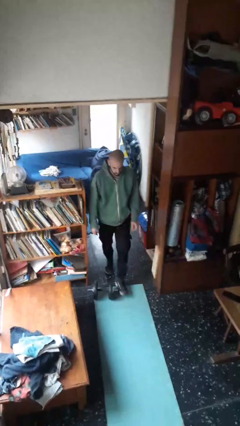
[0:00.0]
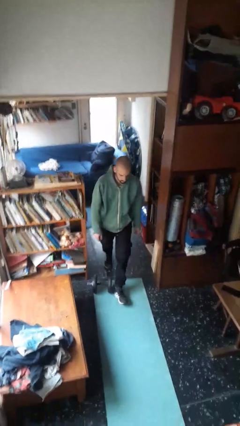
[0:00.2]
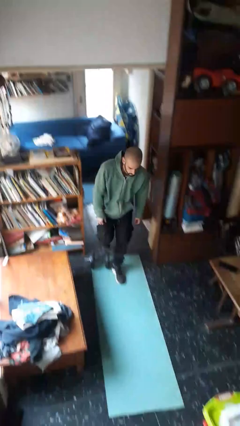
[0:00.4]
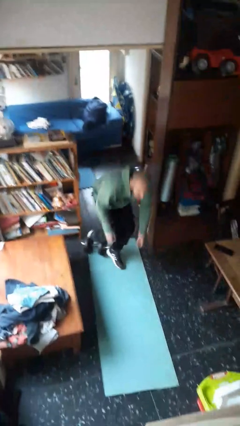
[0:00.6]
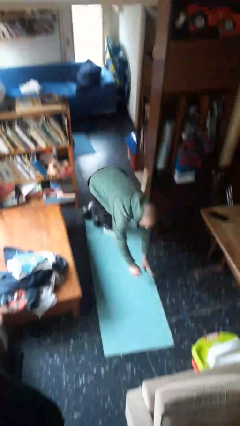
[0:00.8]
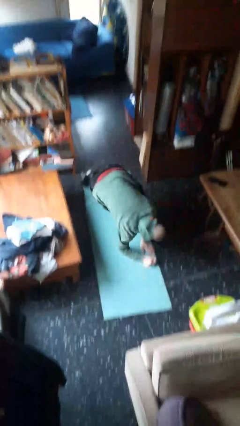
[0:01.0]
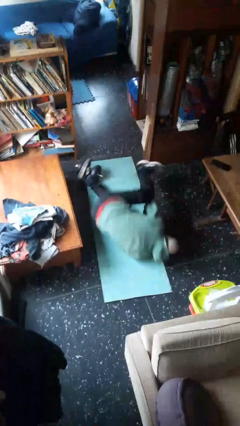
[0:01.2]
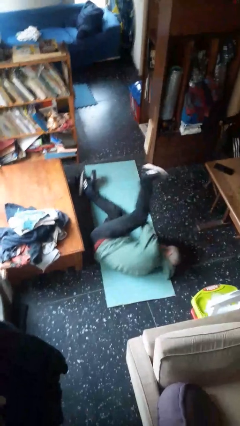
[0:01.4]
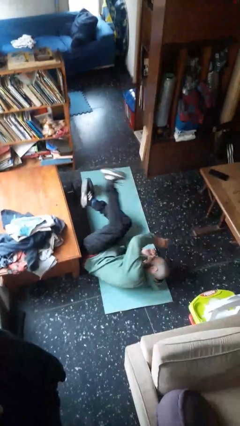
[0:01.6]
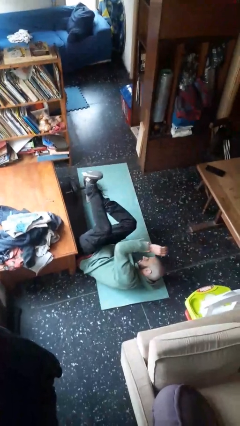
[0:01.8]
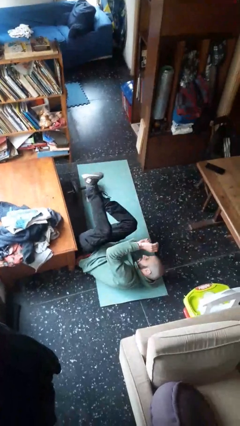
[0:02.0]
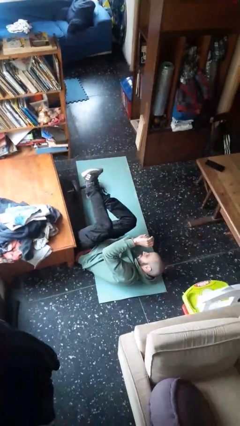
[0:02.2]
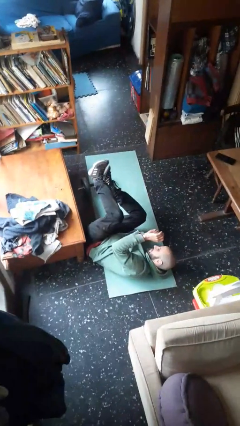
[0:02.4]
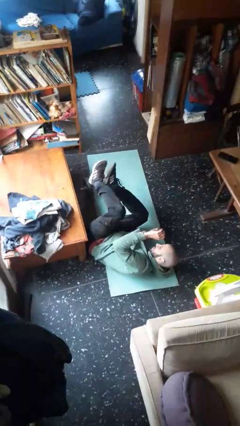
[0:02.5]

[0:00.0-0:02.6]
person trips on object on floor

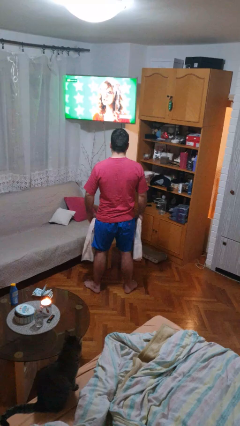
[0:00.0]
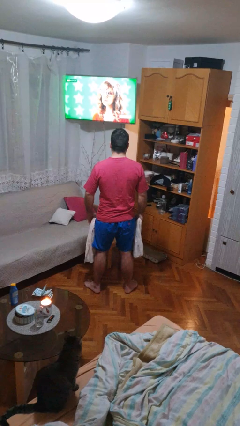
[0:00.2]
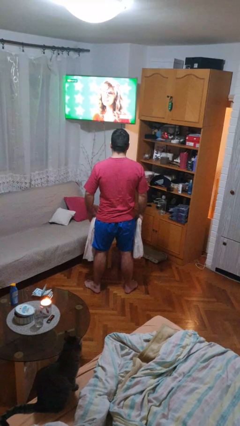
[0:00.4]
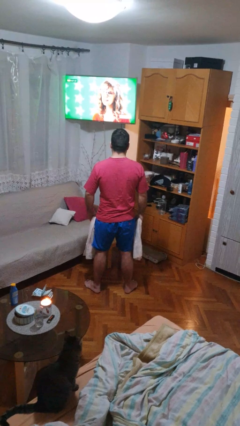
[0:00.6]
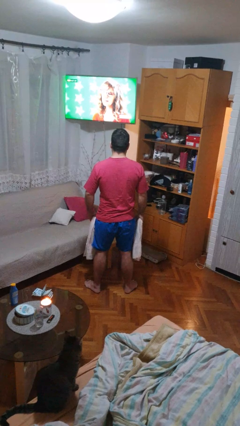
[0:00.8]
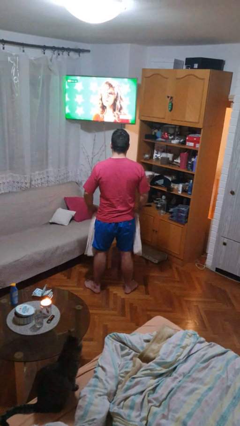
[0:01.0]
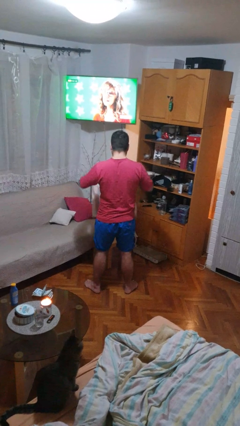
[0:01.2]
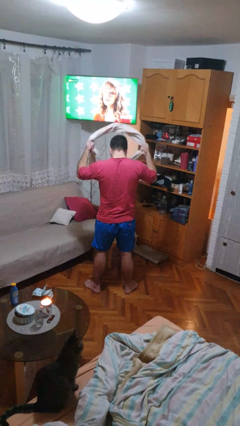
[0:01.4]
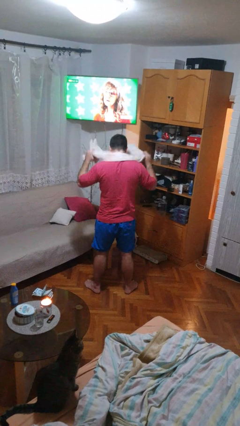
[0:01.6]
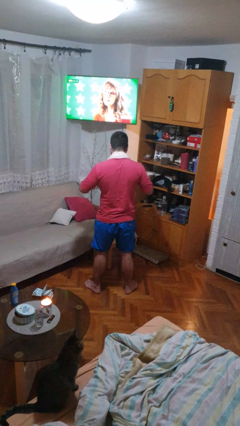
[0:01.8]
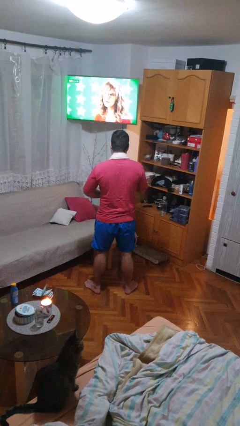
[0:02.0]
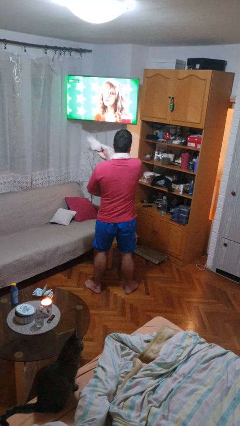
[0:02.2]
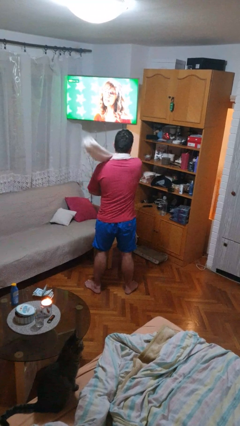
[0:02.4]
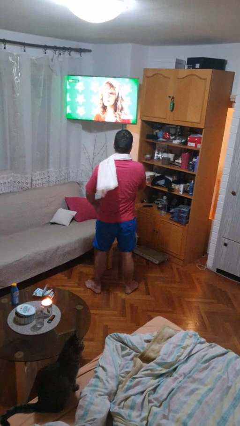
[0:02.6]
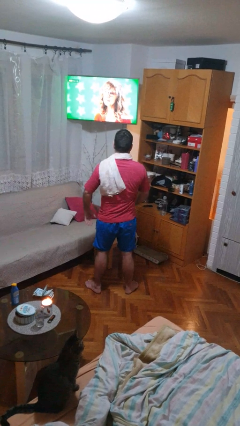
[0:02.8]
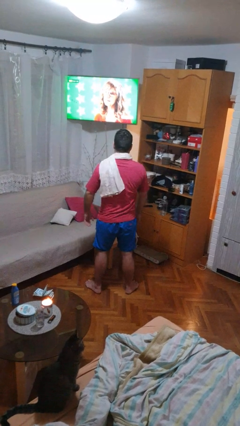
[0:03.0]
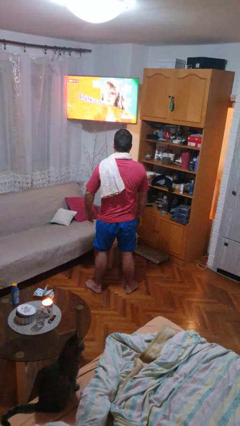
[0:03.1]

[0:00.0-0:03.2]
person puts on scarf

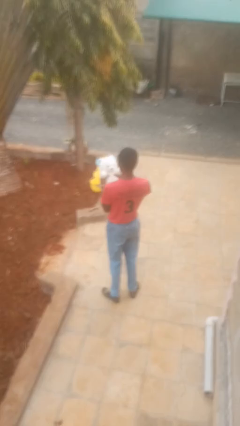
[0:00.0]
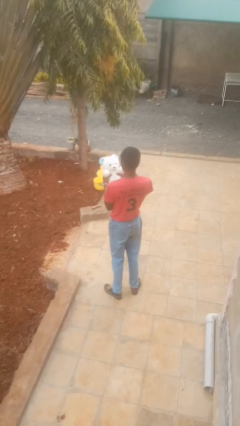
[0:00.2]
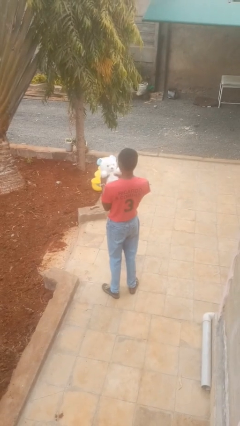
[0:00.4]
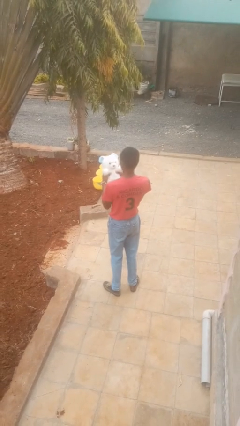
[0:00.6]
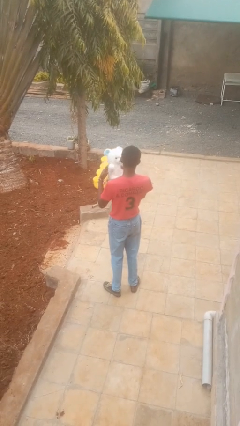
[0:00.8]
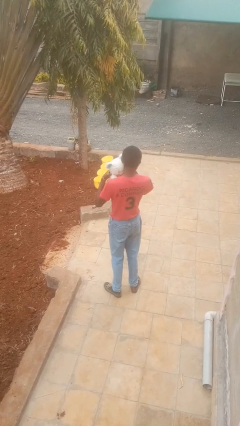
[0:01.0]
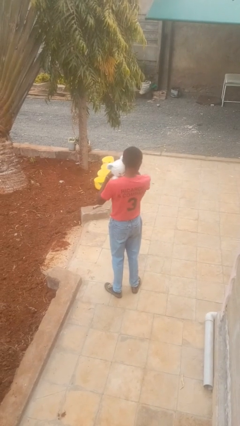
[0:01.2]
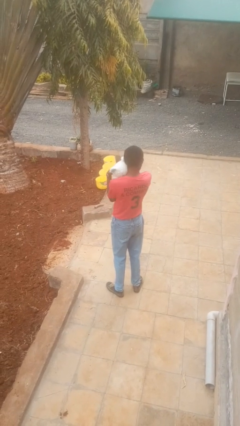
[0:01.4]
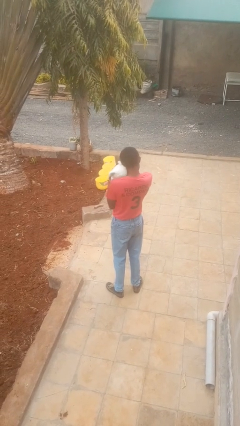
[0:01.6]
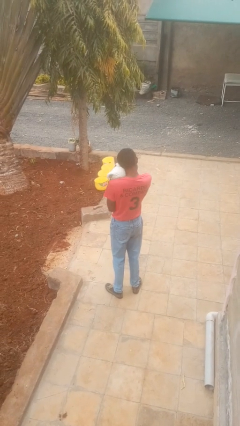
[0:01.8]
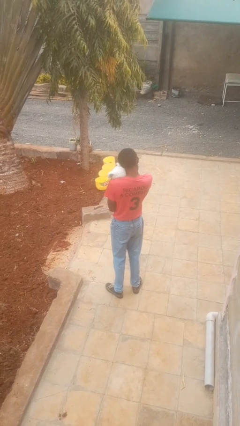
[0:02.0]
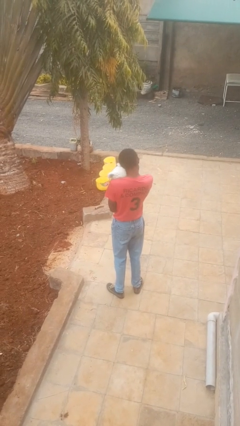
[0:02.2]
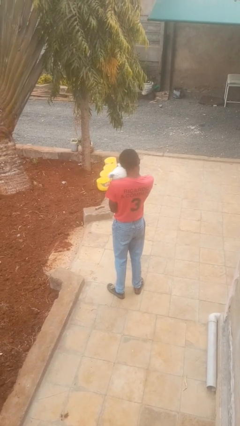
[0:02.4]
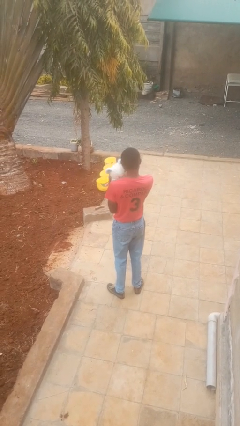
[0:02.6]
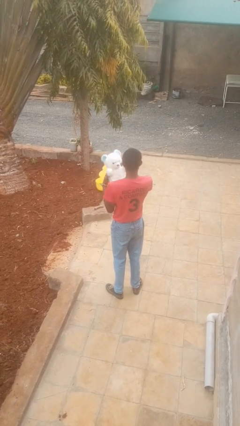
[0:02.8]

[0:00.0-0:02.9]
person hugs stuffed animal

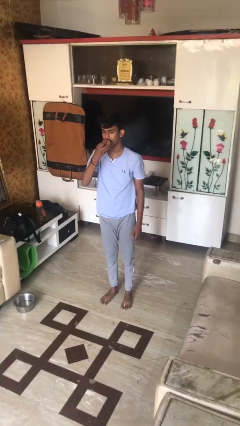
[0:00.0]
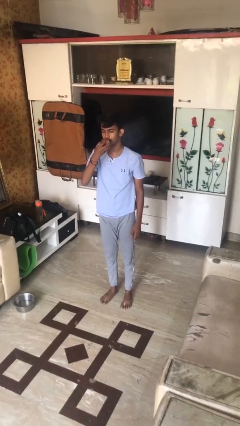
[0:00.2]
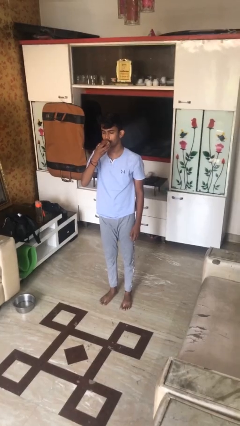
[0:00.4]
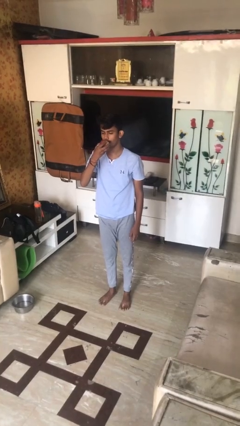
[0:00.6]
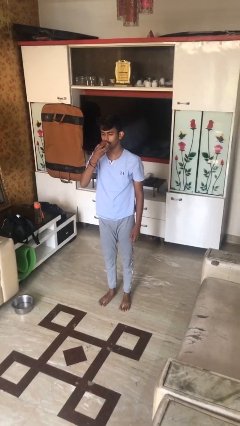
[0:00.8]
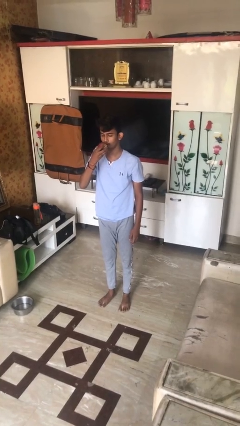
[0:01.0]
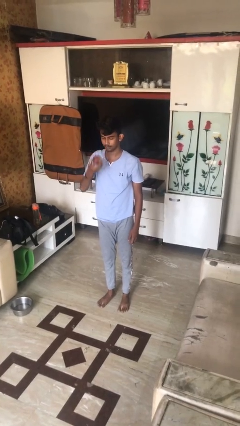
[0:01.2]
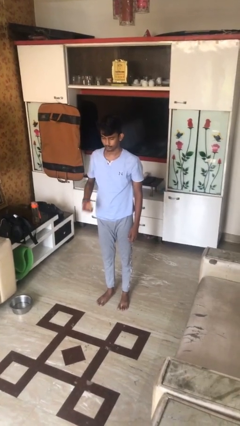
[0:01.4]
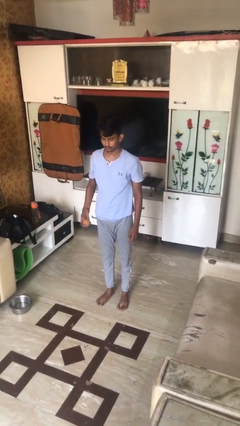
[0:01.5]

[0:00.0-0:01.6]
person eats apple

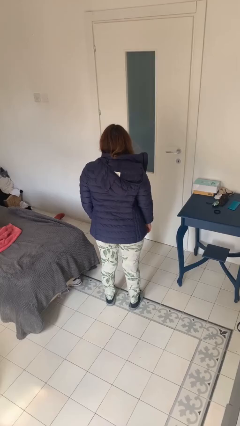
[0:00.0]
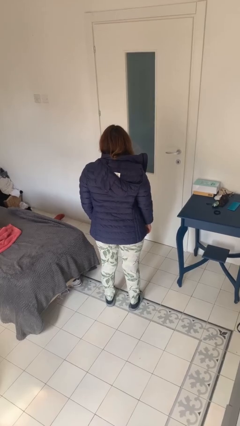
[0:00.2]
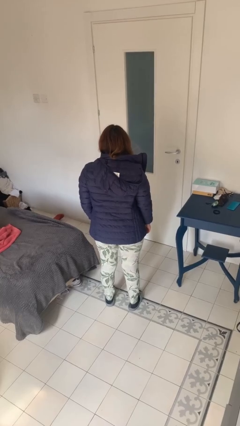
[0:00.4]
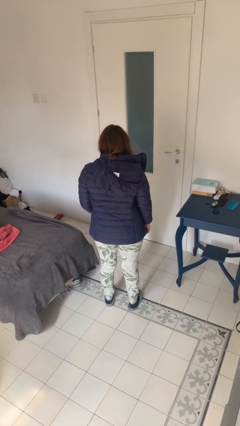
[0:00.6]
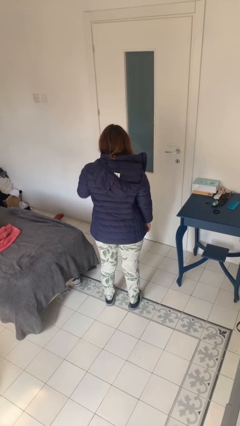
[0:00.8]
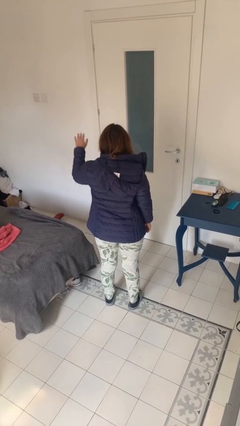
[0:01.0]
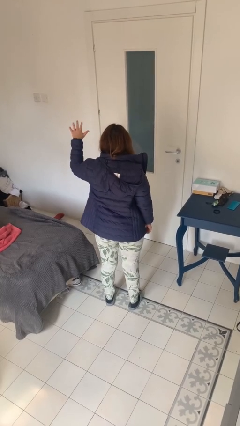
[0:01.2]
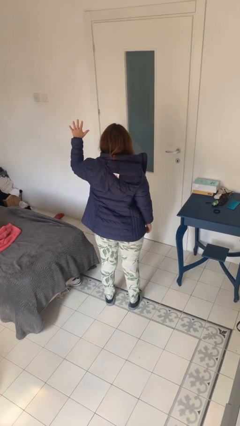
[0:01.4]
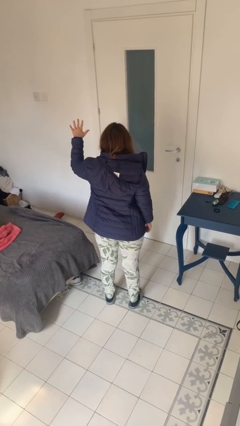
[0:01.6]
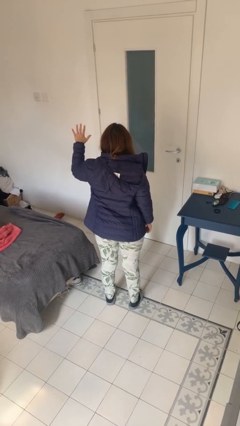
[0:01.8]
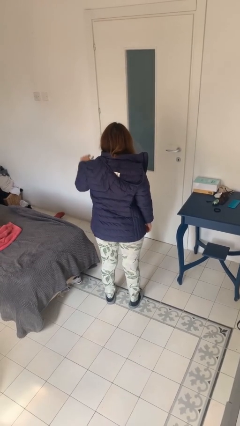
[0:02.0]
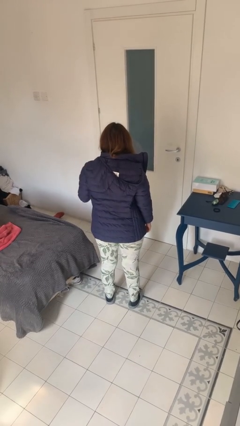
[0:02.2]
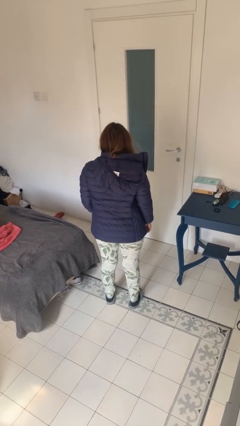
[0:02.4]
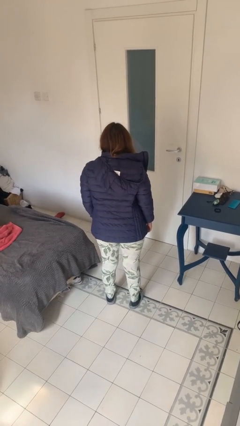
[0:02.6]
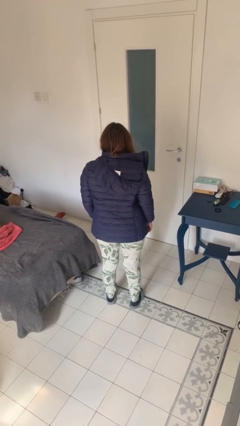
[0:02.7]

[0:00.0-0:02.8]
person gestures number five

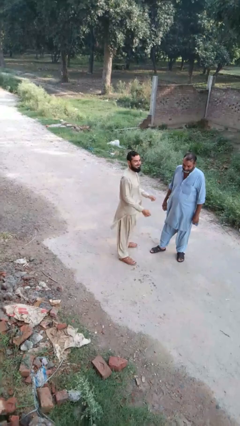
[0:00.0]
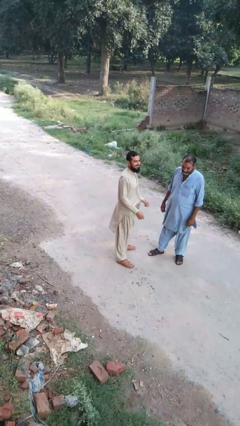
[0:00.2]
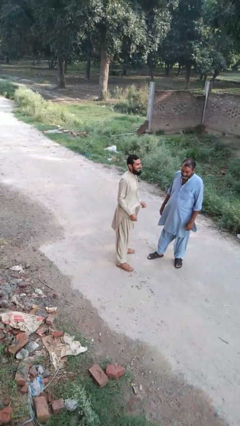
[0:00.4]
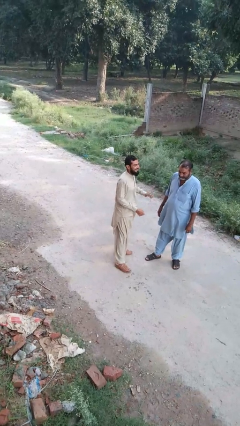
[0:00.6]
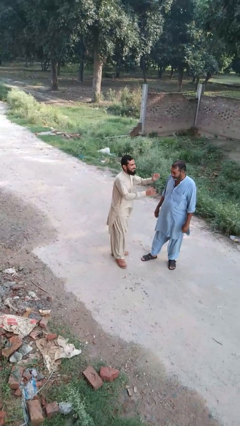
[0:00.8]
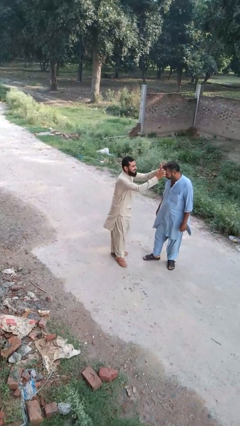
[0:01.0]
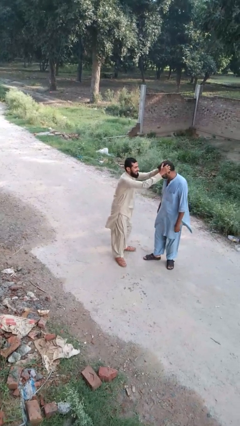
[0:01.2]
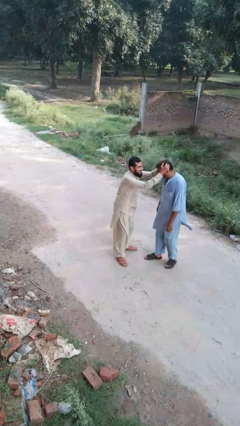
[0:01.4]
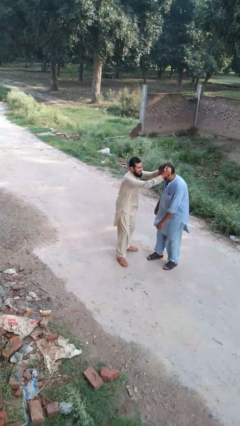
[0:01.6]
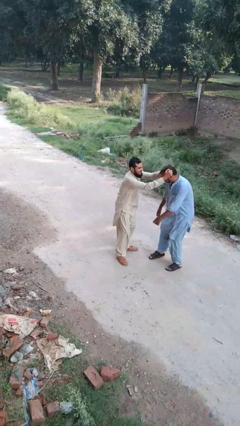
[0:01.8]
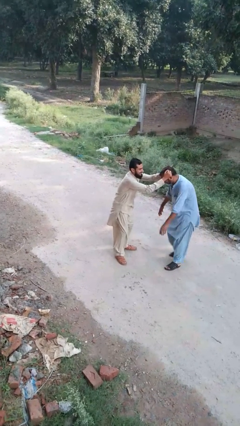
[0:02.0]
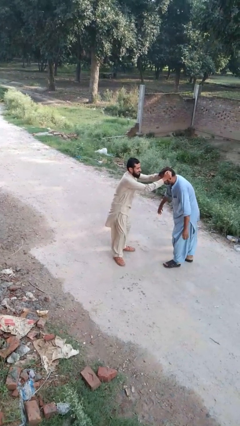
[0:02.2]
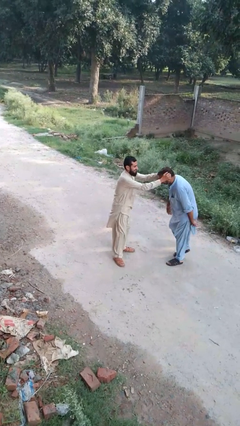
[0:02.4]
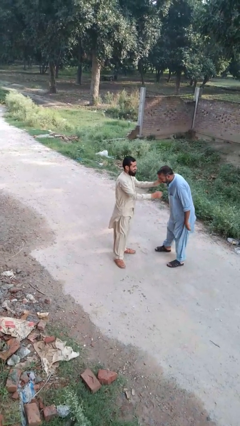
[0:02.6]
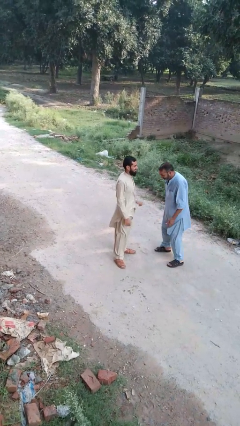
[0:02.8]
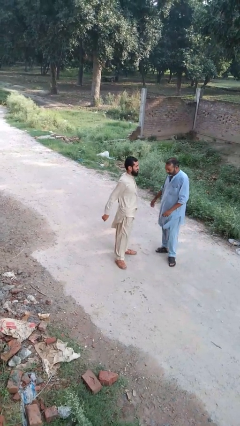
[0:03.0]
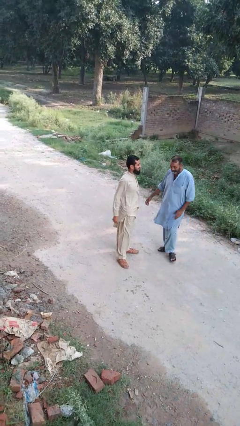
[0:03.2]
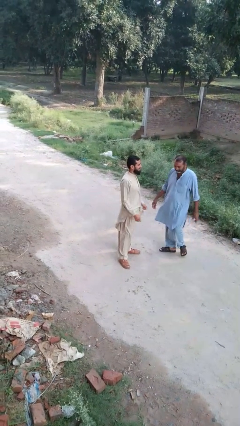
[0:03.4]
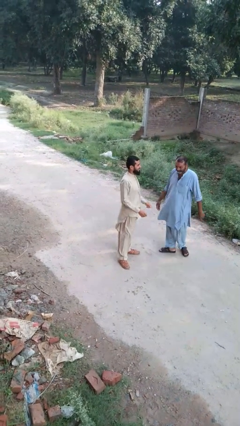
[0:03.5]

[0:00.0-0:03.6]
person grabs person by hair

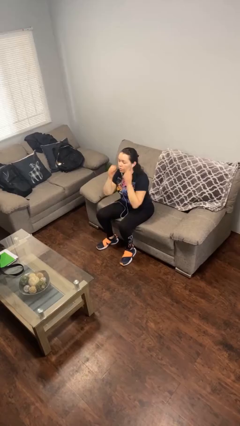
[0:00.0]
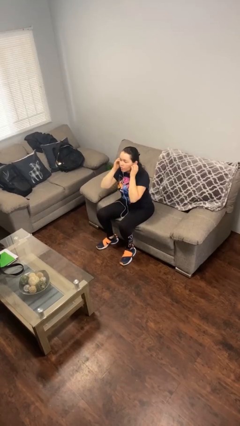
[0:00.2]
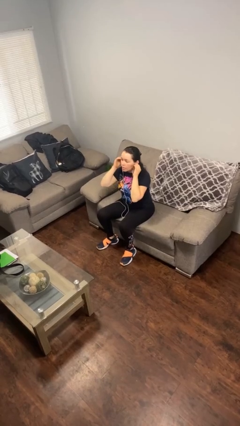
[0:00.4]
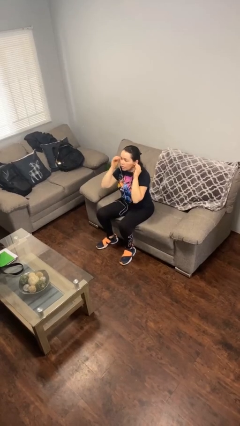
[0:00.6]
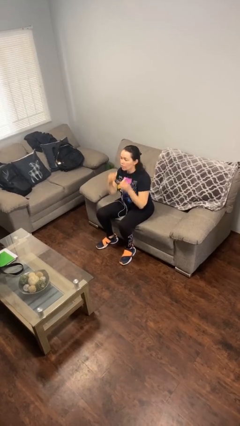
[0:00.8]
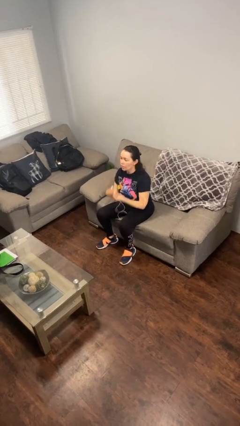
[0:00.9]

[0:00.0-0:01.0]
person takes off headphones
